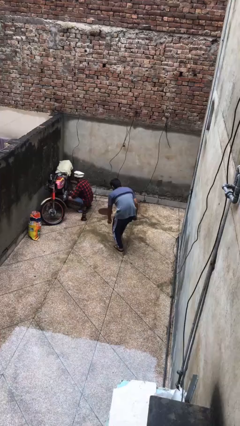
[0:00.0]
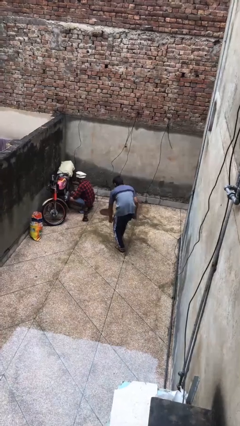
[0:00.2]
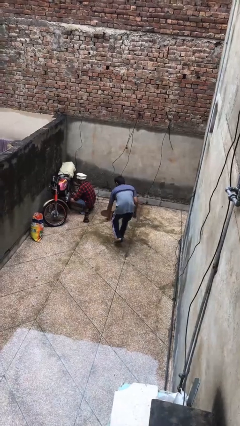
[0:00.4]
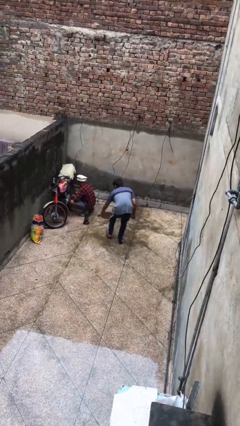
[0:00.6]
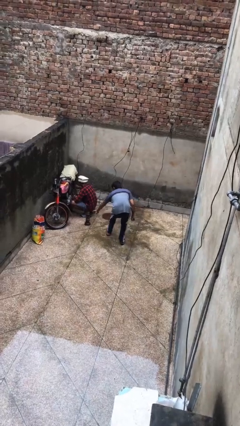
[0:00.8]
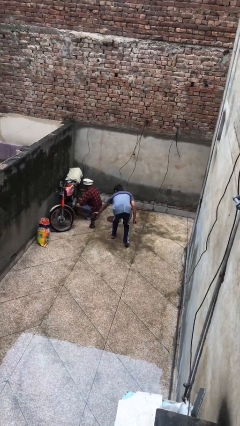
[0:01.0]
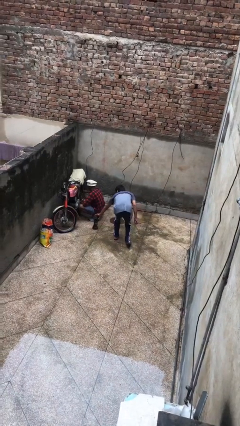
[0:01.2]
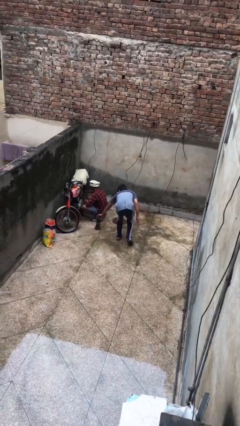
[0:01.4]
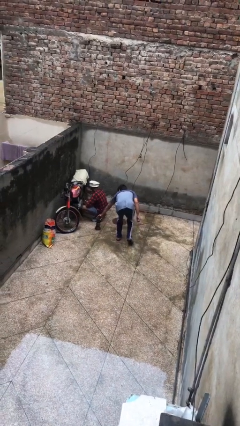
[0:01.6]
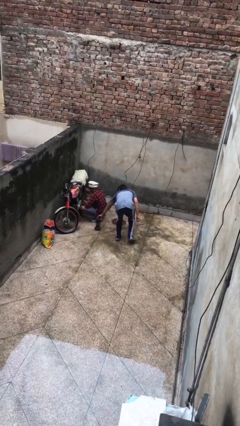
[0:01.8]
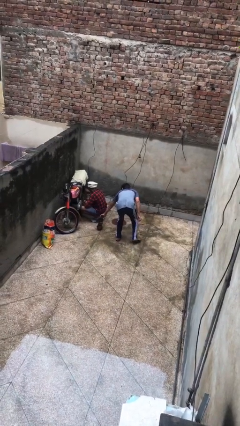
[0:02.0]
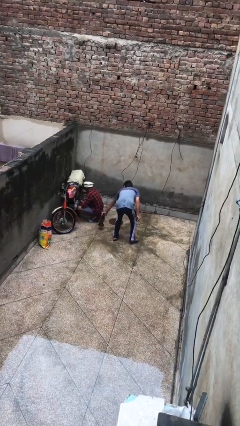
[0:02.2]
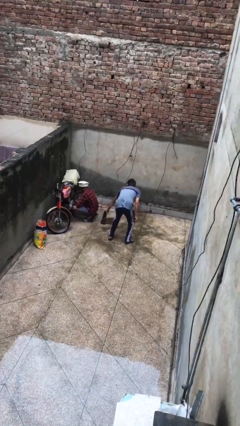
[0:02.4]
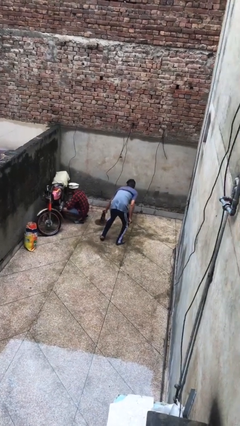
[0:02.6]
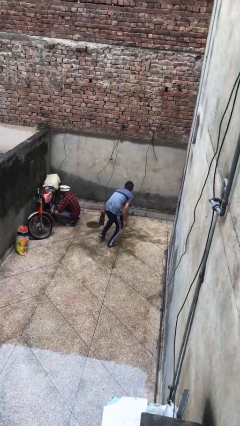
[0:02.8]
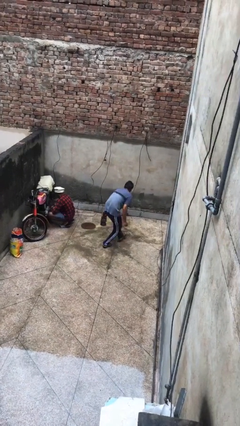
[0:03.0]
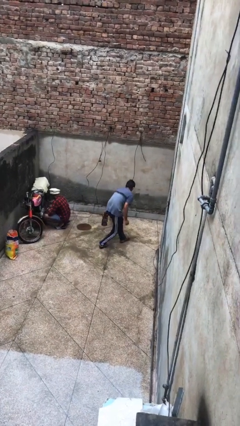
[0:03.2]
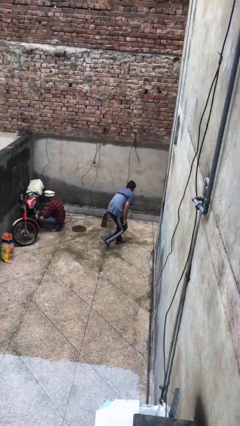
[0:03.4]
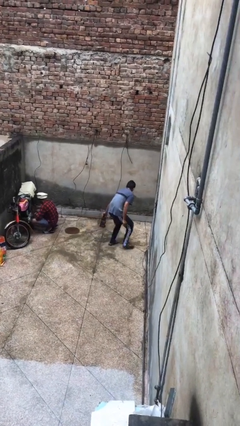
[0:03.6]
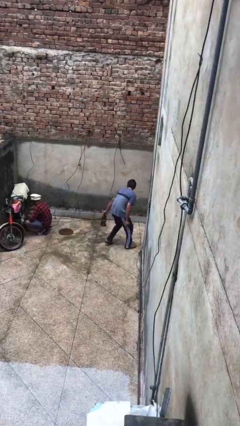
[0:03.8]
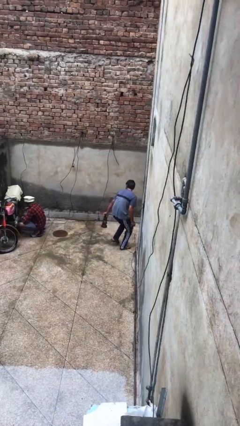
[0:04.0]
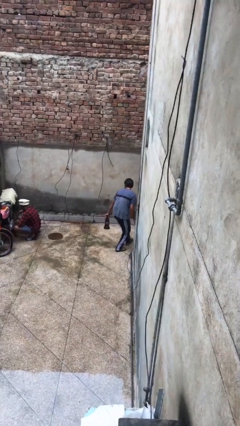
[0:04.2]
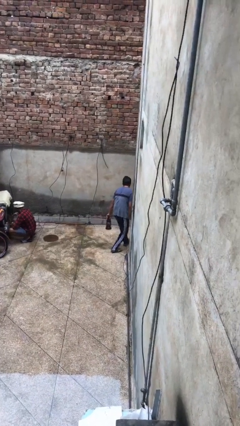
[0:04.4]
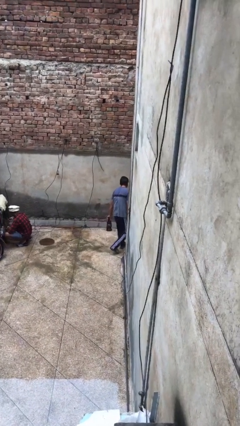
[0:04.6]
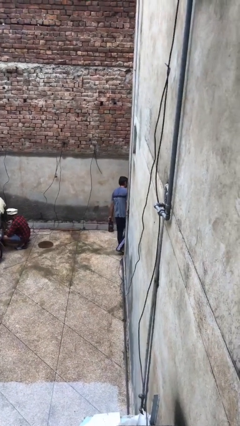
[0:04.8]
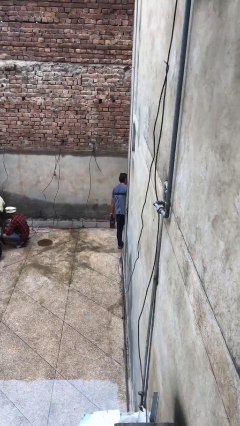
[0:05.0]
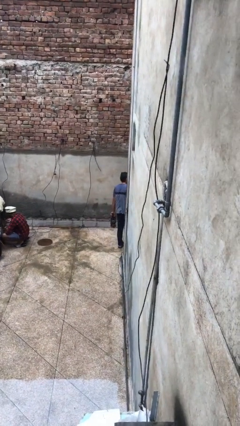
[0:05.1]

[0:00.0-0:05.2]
person steals object from person

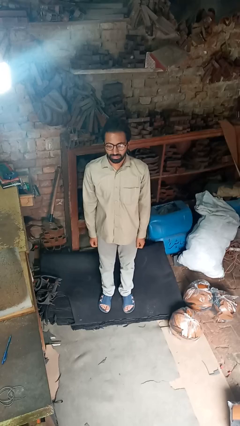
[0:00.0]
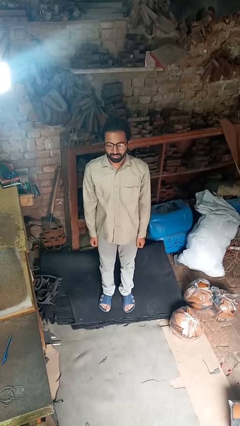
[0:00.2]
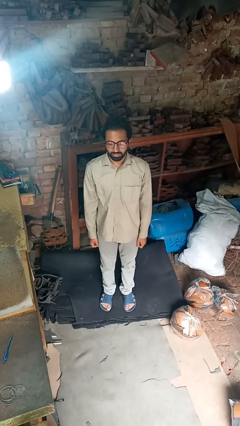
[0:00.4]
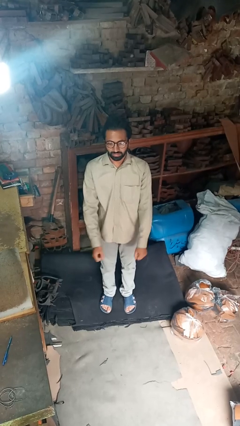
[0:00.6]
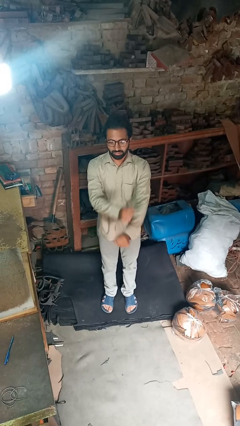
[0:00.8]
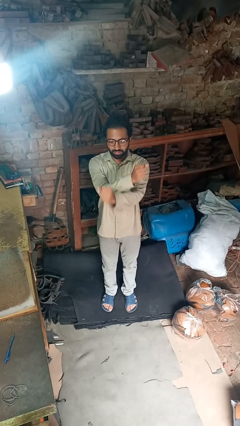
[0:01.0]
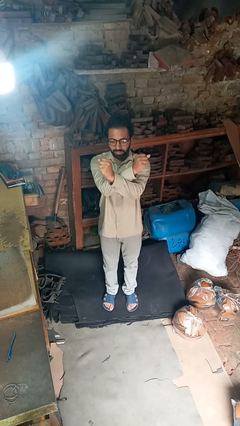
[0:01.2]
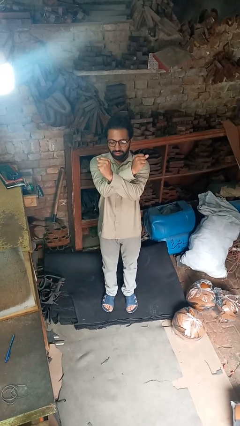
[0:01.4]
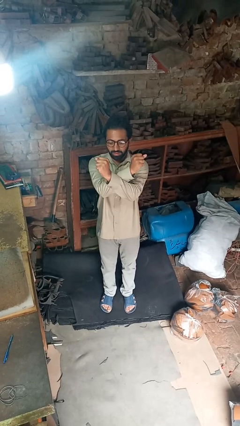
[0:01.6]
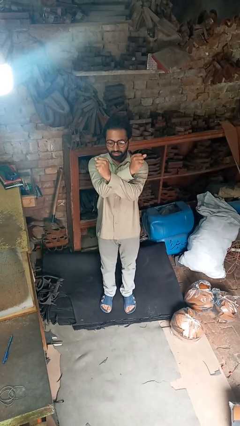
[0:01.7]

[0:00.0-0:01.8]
person crosses arms

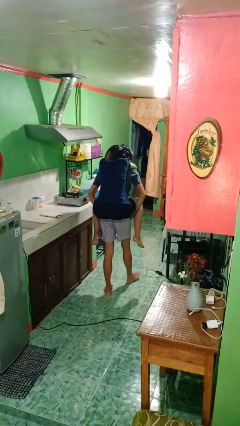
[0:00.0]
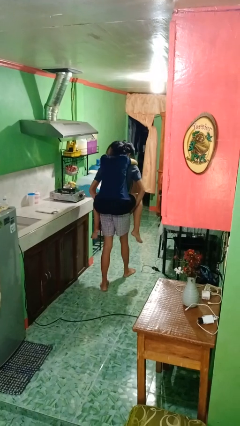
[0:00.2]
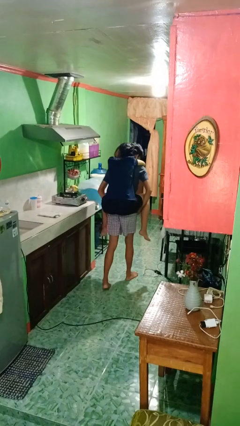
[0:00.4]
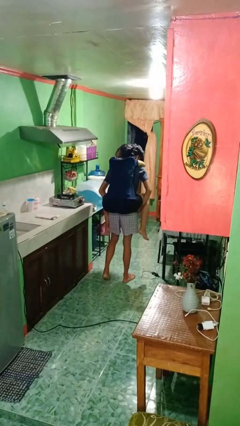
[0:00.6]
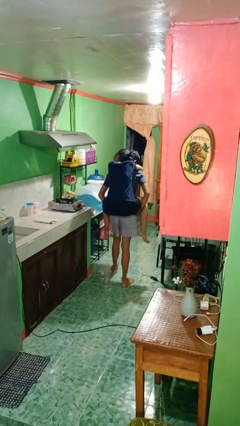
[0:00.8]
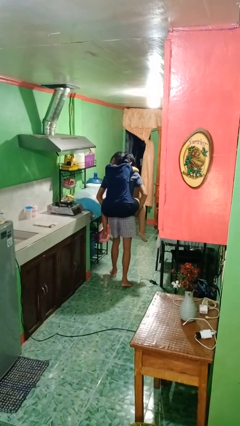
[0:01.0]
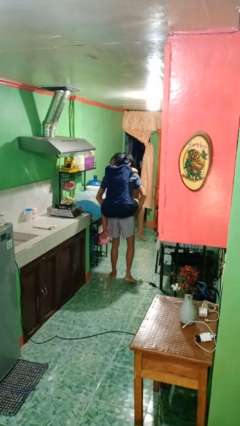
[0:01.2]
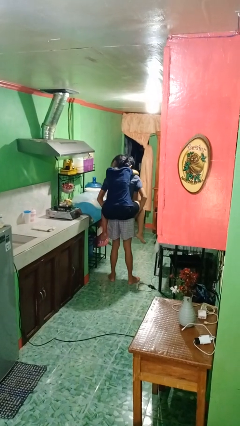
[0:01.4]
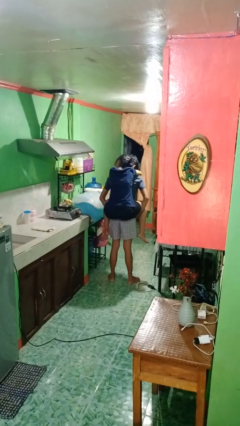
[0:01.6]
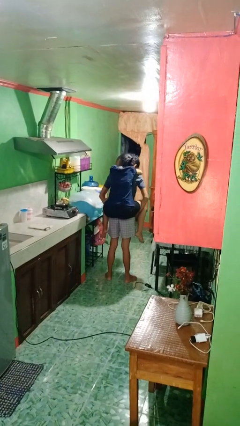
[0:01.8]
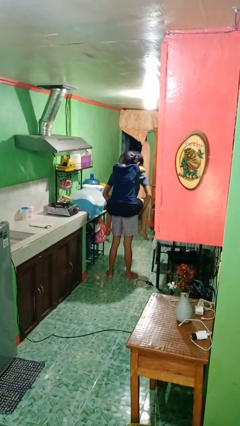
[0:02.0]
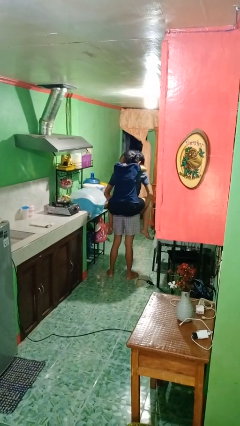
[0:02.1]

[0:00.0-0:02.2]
person carries person on back

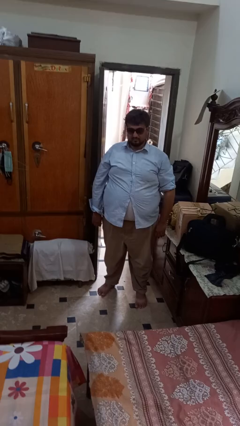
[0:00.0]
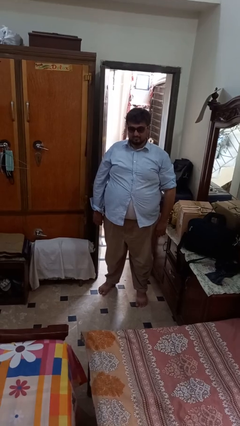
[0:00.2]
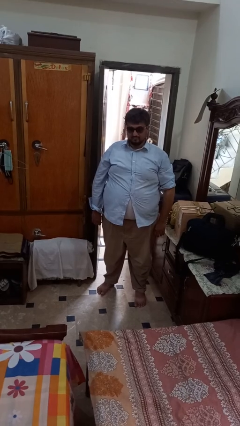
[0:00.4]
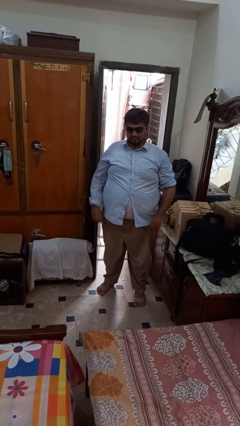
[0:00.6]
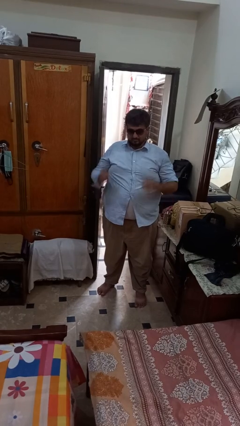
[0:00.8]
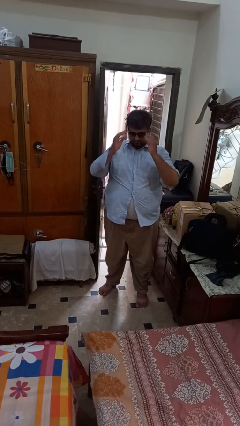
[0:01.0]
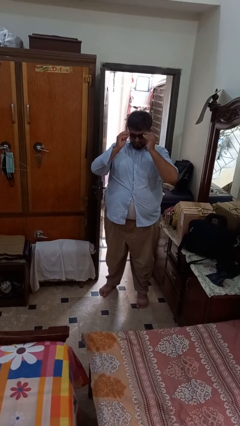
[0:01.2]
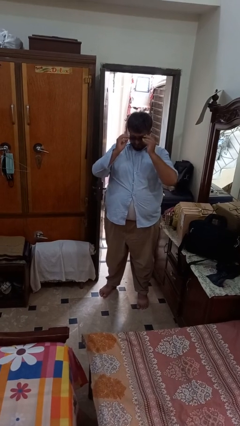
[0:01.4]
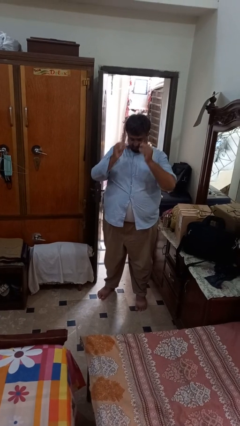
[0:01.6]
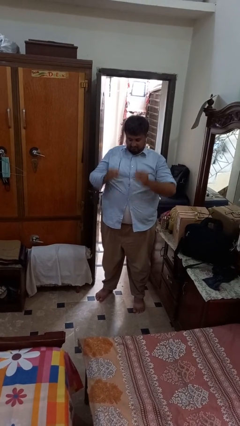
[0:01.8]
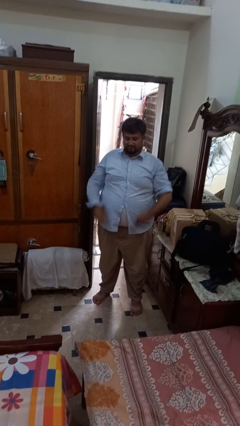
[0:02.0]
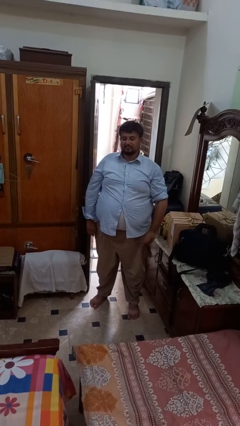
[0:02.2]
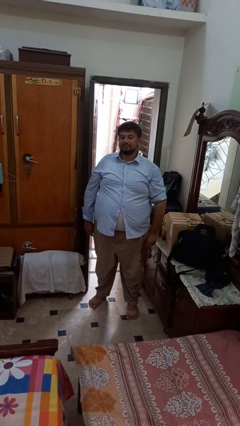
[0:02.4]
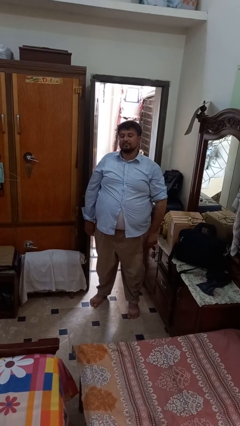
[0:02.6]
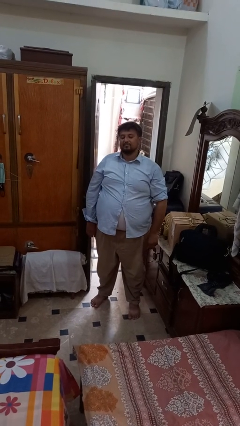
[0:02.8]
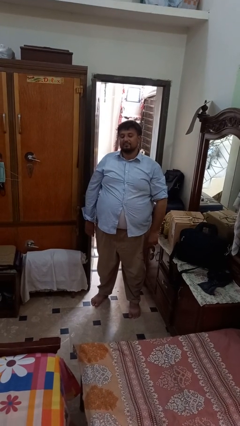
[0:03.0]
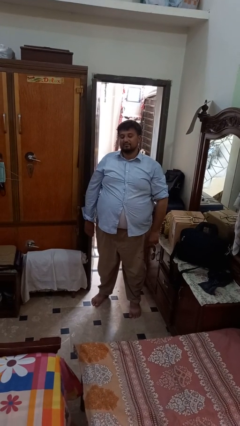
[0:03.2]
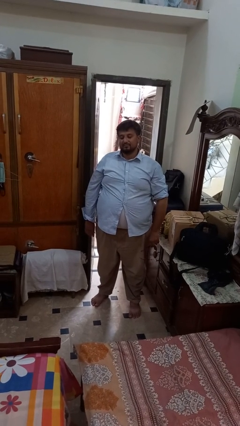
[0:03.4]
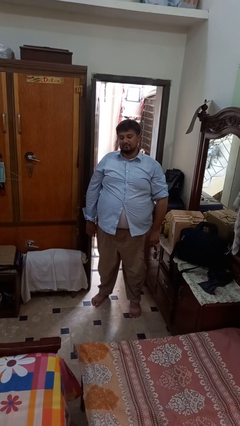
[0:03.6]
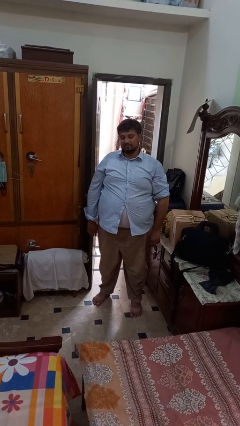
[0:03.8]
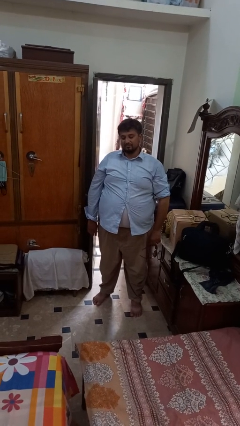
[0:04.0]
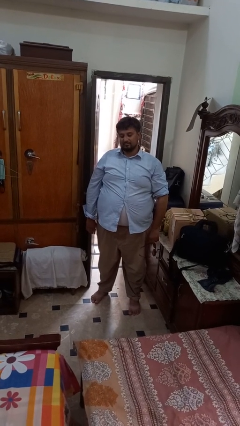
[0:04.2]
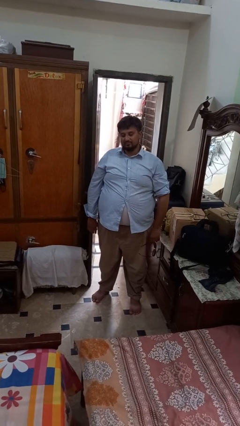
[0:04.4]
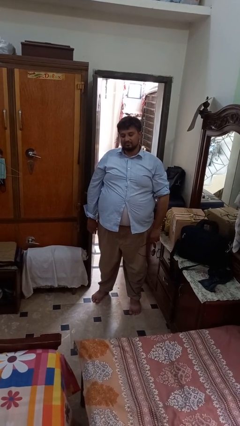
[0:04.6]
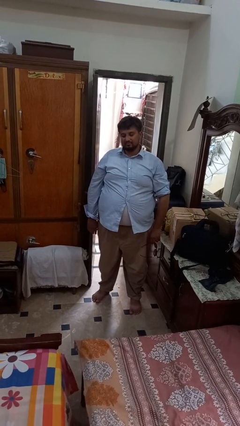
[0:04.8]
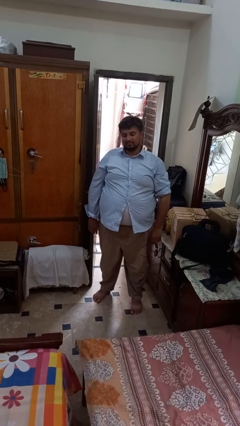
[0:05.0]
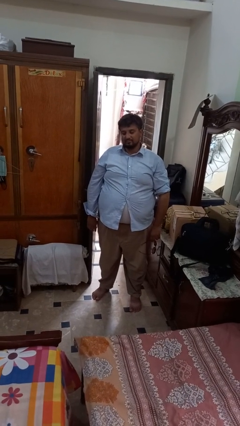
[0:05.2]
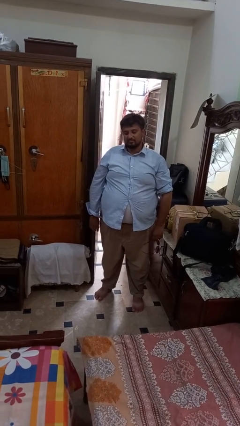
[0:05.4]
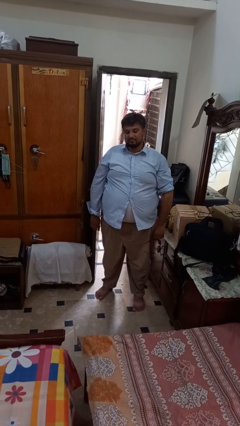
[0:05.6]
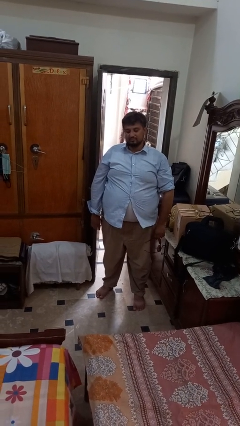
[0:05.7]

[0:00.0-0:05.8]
person takes off sunglasses

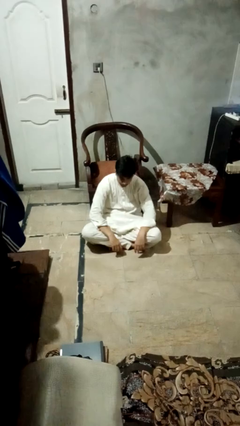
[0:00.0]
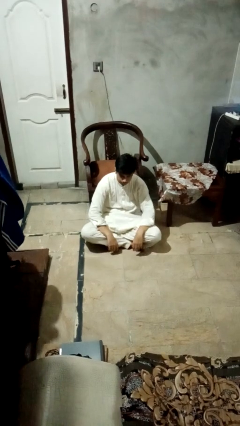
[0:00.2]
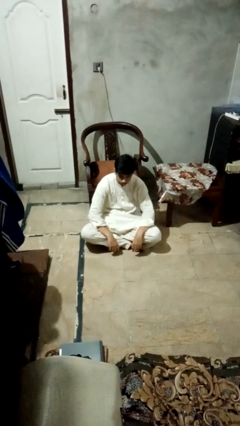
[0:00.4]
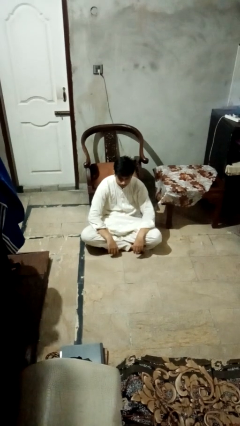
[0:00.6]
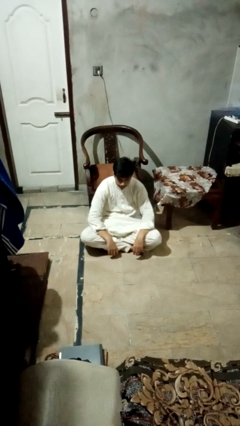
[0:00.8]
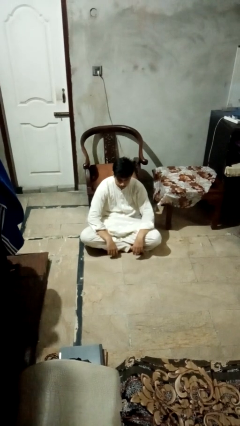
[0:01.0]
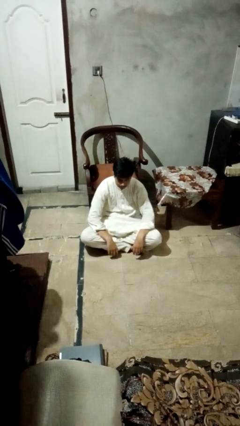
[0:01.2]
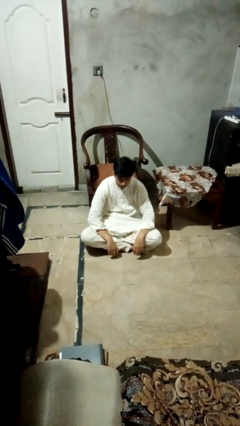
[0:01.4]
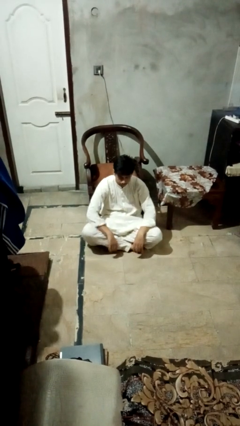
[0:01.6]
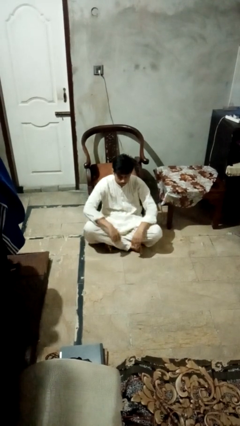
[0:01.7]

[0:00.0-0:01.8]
person crosses legs

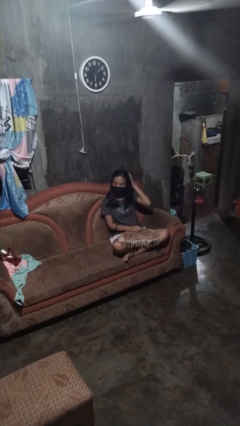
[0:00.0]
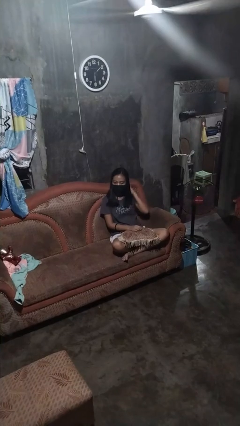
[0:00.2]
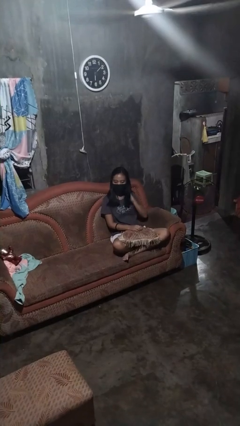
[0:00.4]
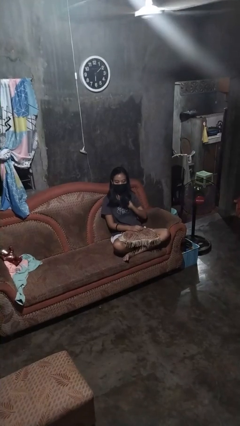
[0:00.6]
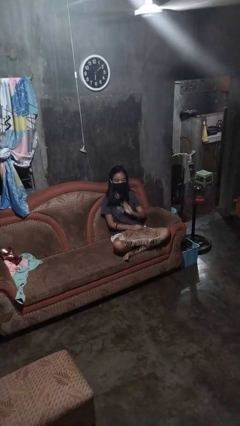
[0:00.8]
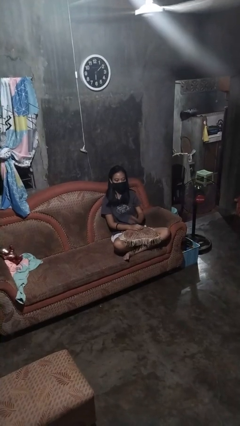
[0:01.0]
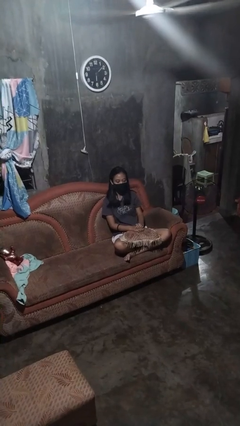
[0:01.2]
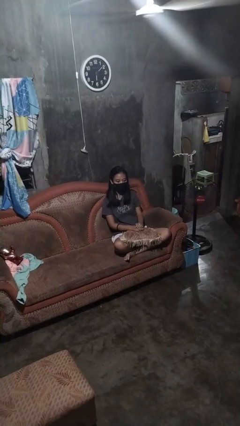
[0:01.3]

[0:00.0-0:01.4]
person strokes hair
